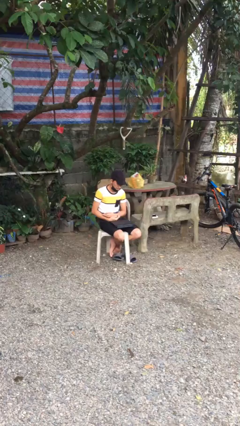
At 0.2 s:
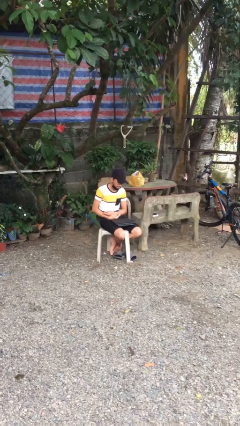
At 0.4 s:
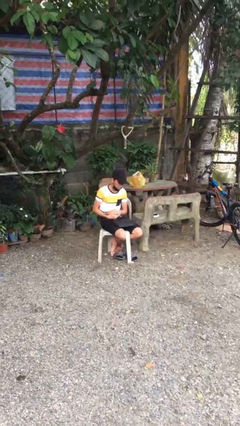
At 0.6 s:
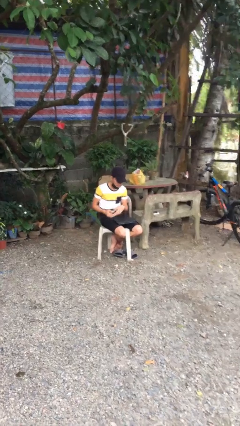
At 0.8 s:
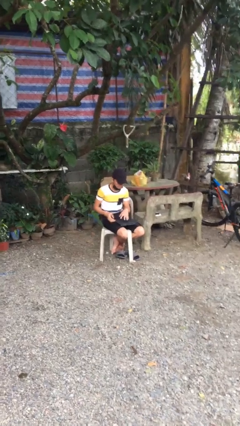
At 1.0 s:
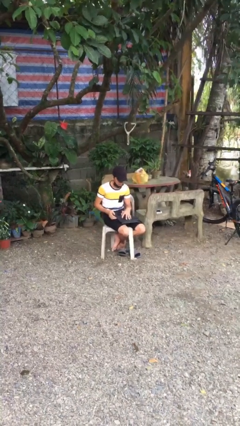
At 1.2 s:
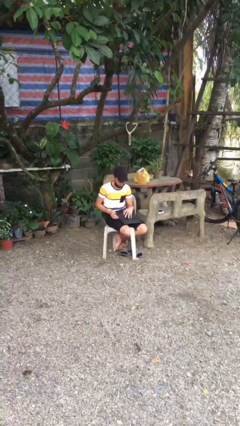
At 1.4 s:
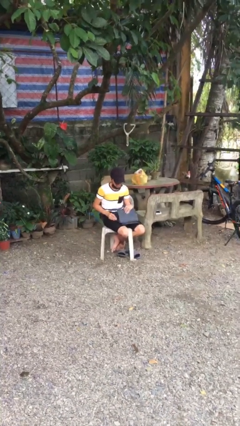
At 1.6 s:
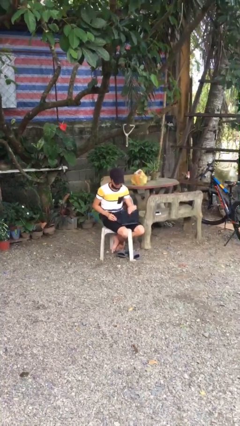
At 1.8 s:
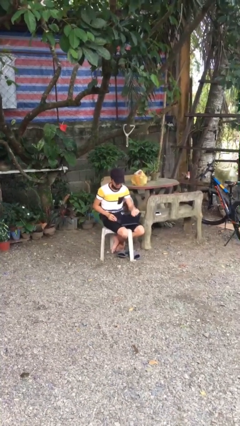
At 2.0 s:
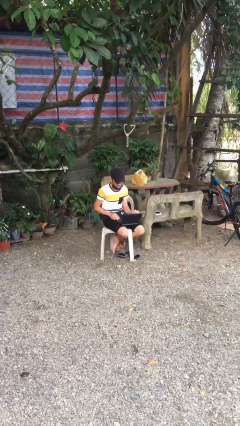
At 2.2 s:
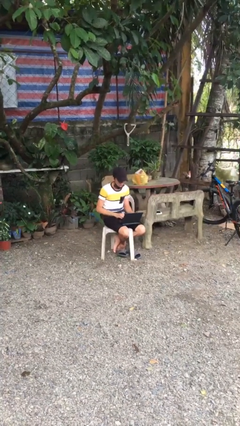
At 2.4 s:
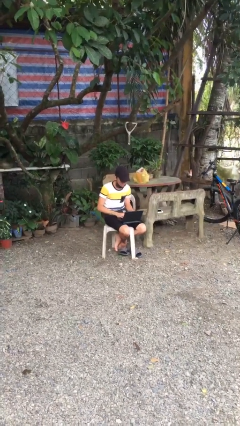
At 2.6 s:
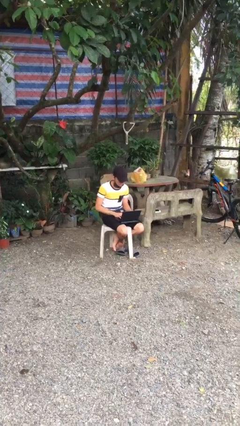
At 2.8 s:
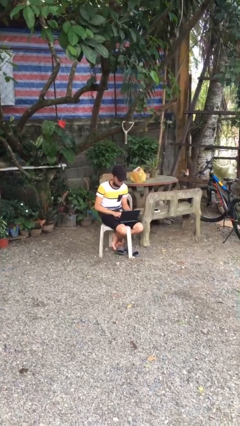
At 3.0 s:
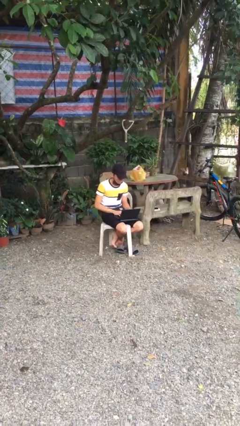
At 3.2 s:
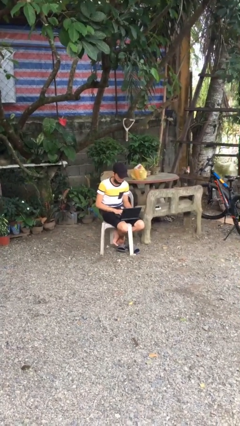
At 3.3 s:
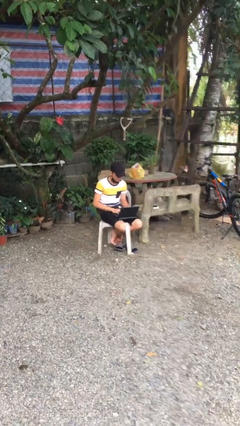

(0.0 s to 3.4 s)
person interacts with laptop

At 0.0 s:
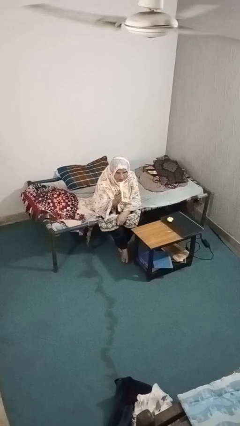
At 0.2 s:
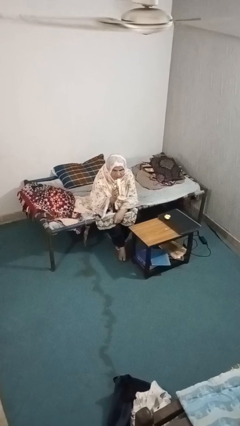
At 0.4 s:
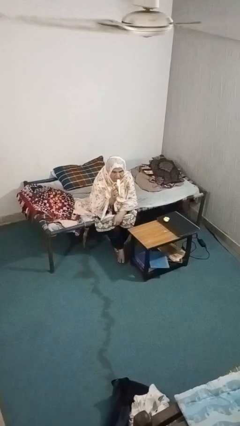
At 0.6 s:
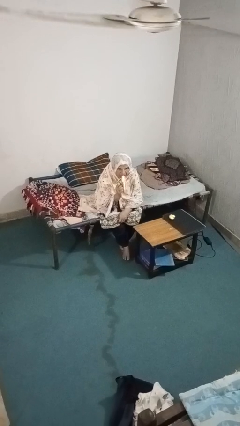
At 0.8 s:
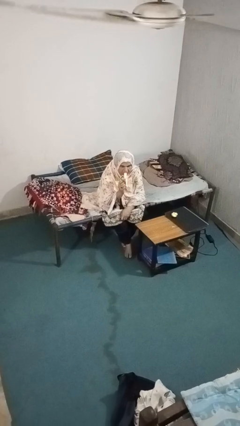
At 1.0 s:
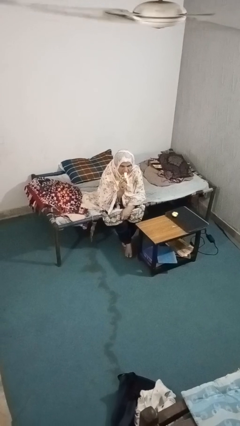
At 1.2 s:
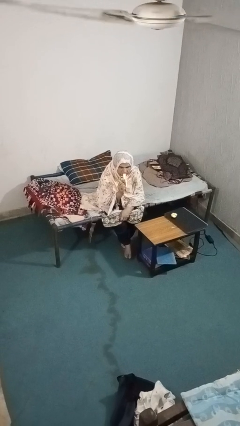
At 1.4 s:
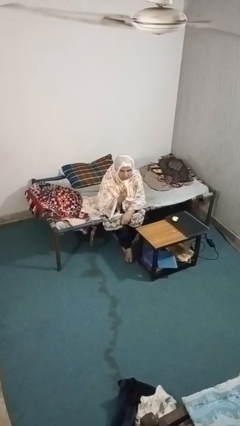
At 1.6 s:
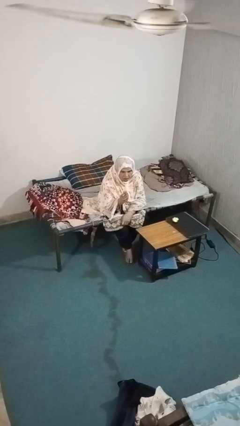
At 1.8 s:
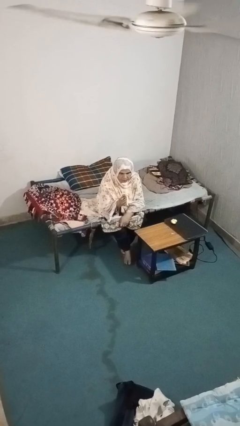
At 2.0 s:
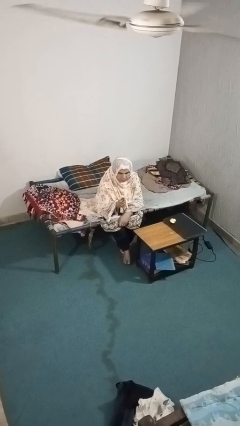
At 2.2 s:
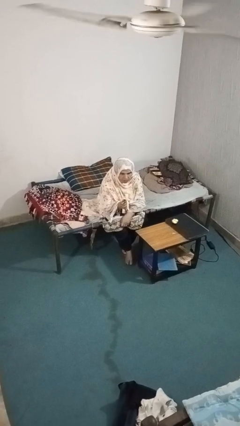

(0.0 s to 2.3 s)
person eats banana

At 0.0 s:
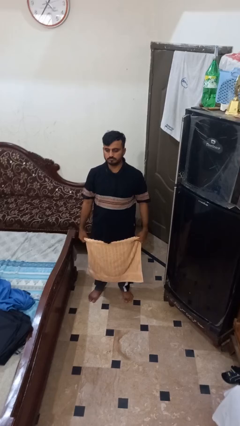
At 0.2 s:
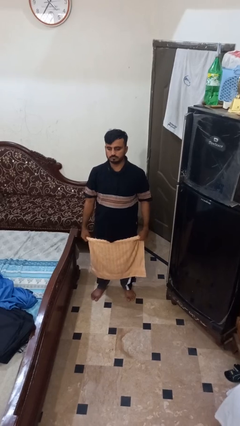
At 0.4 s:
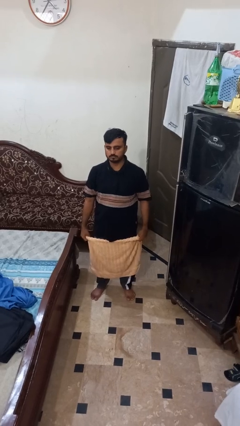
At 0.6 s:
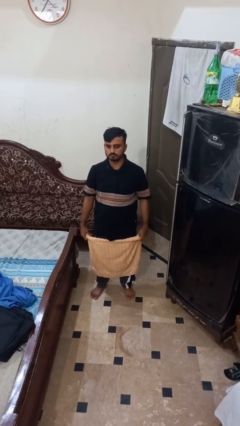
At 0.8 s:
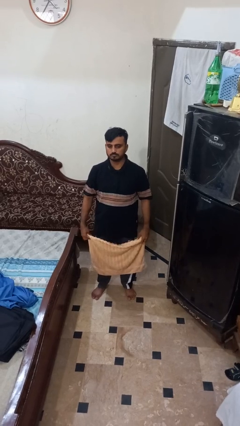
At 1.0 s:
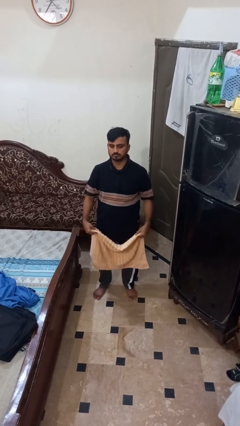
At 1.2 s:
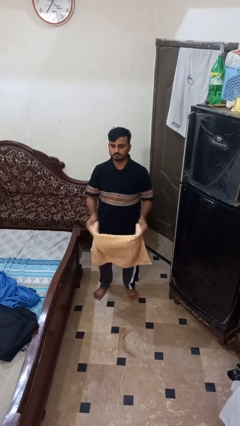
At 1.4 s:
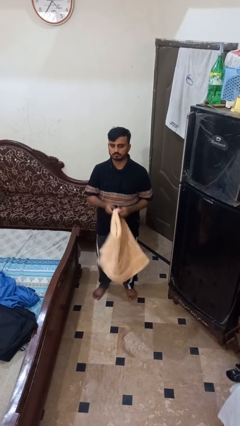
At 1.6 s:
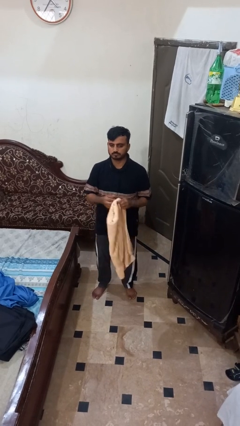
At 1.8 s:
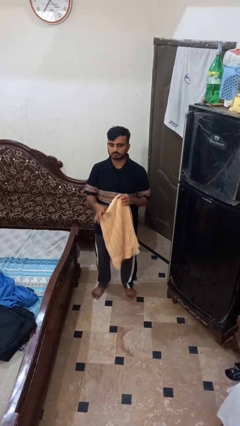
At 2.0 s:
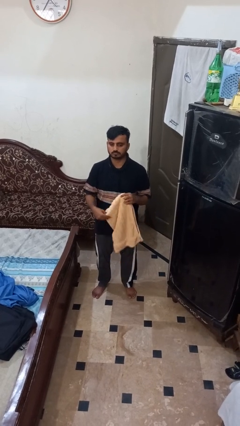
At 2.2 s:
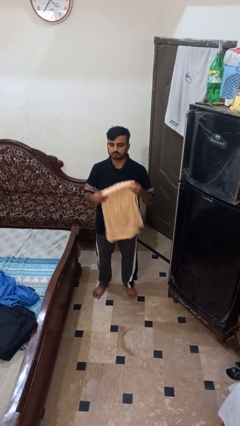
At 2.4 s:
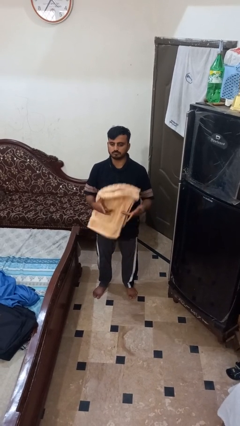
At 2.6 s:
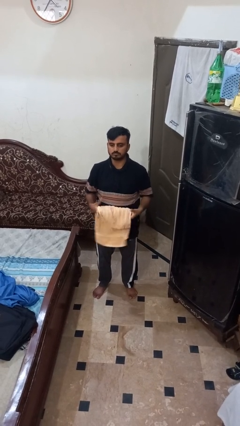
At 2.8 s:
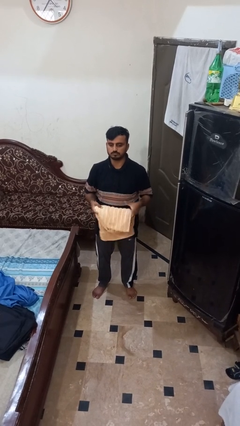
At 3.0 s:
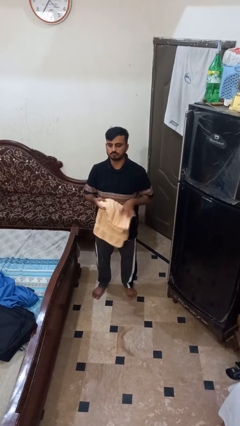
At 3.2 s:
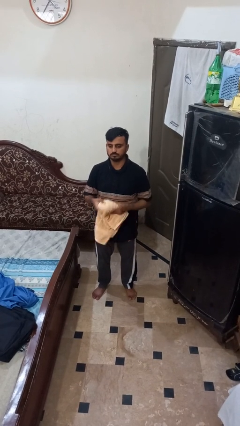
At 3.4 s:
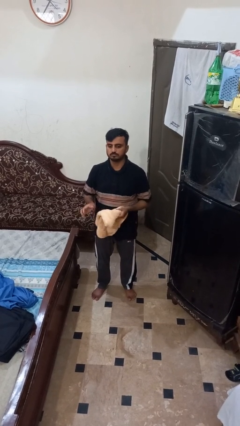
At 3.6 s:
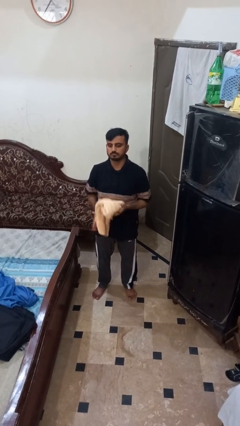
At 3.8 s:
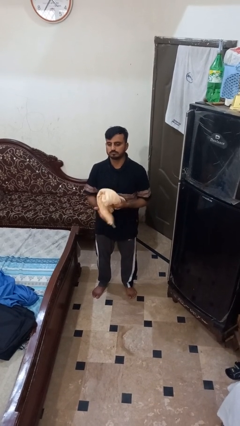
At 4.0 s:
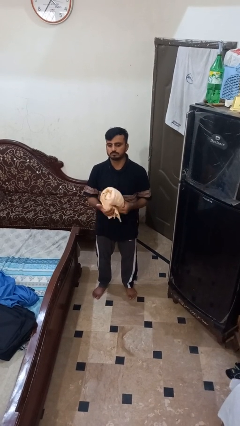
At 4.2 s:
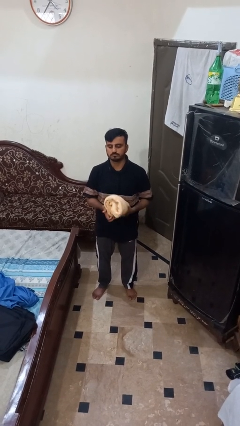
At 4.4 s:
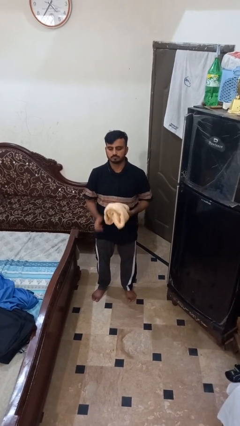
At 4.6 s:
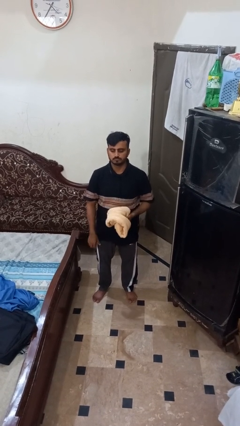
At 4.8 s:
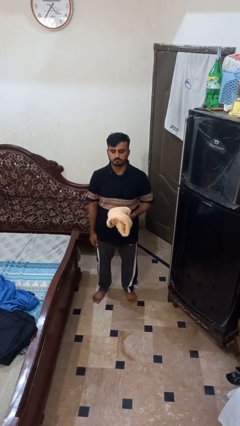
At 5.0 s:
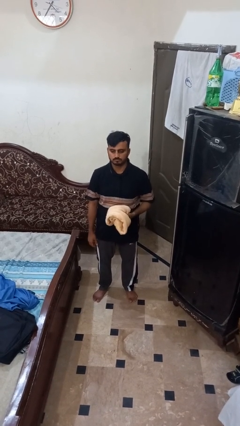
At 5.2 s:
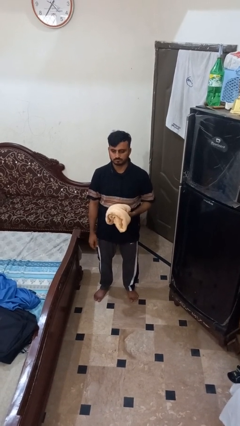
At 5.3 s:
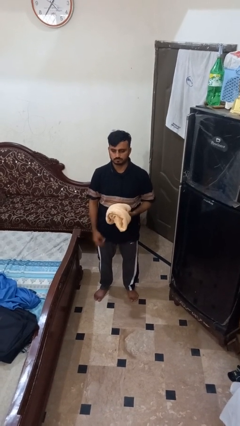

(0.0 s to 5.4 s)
person folds towel

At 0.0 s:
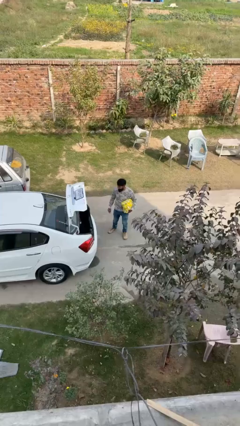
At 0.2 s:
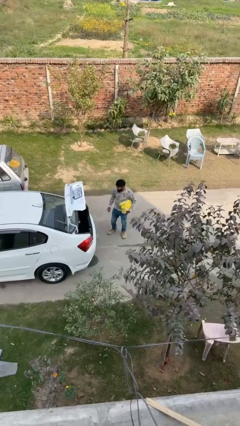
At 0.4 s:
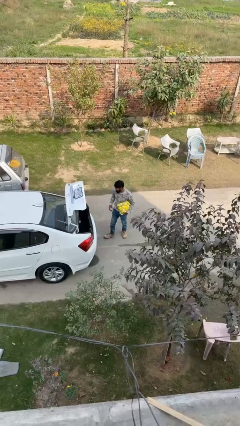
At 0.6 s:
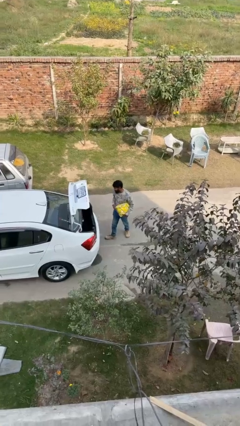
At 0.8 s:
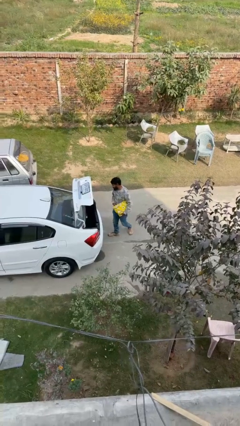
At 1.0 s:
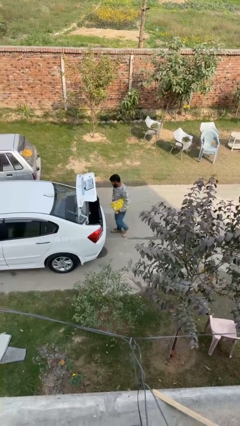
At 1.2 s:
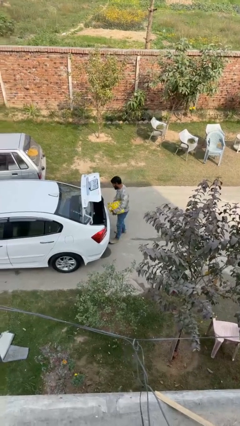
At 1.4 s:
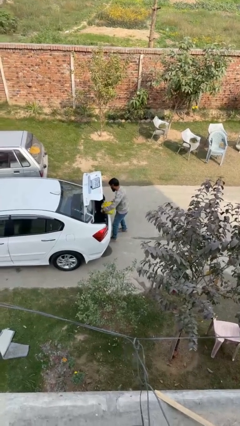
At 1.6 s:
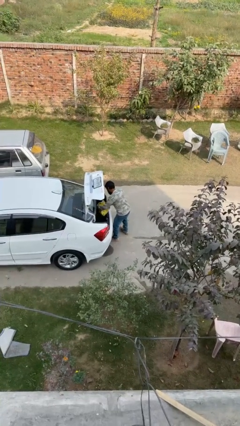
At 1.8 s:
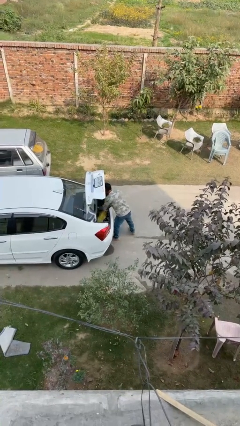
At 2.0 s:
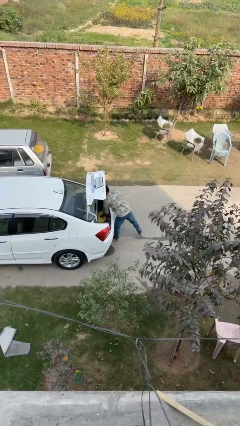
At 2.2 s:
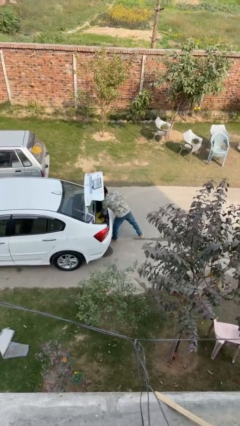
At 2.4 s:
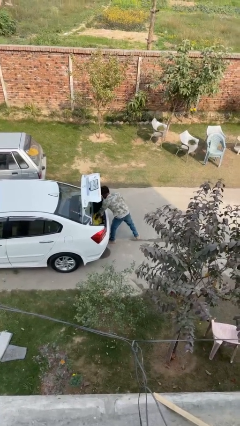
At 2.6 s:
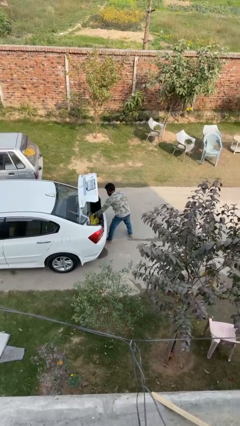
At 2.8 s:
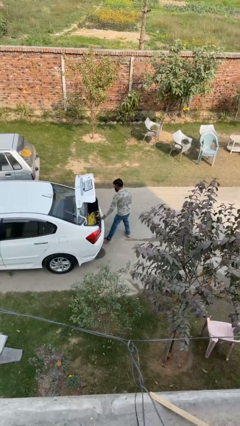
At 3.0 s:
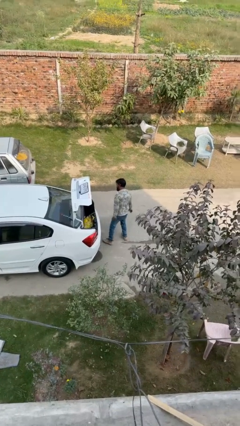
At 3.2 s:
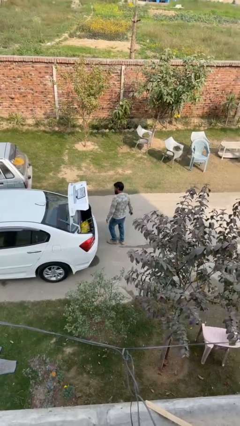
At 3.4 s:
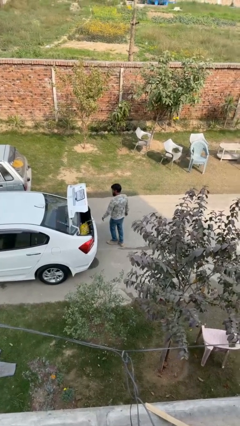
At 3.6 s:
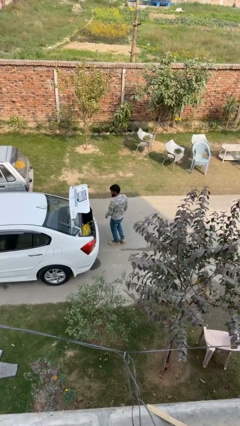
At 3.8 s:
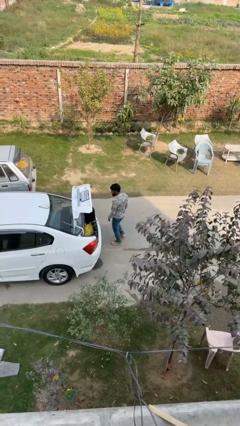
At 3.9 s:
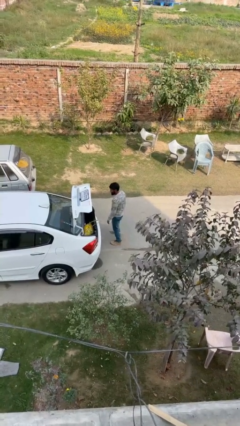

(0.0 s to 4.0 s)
person loads car

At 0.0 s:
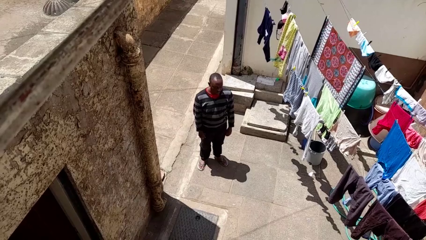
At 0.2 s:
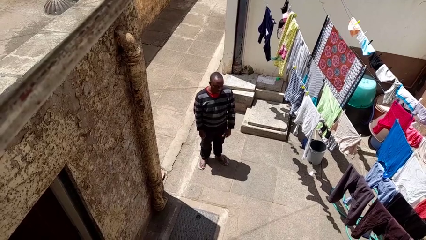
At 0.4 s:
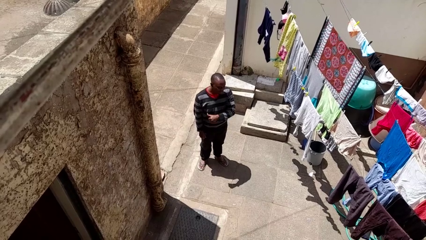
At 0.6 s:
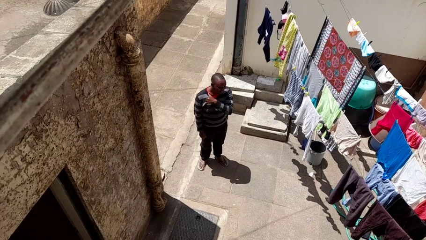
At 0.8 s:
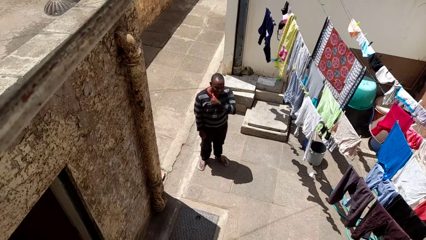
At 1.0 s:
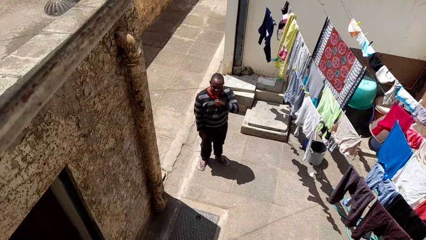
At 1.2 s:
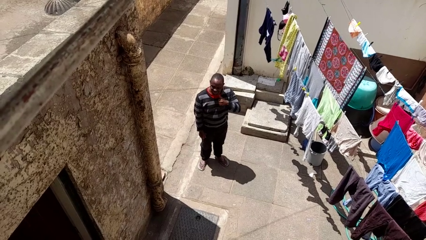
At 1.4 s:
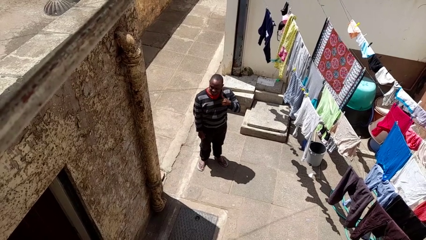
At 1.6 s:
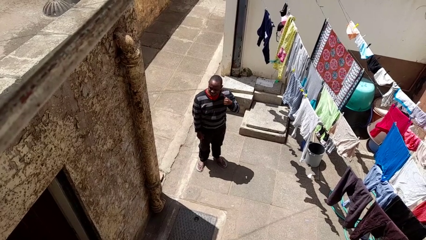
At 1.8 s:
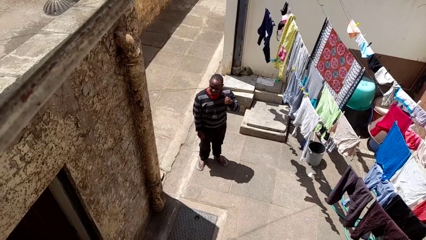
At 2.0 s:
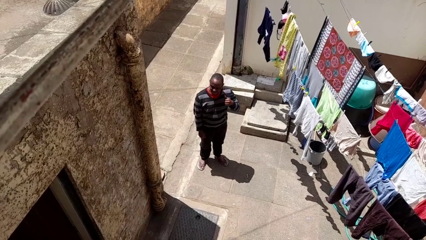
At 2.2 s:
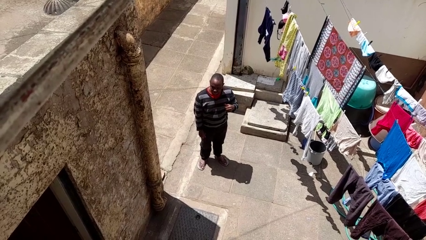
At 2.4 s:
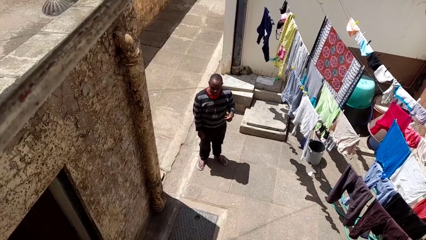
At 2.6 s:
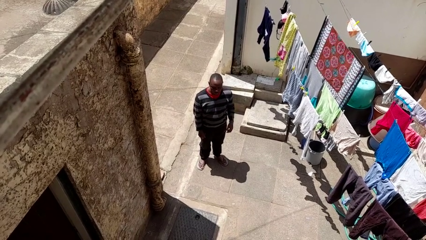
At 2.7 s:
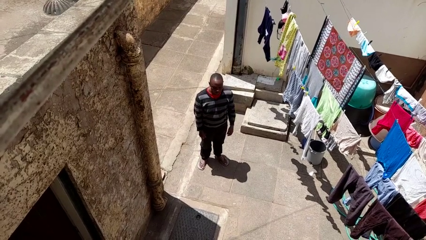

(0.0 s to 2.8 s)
person gestures cut
